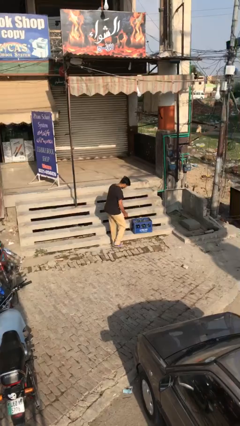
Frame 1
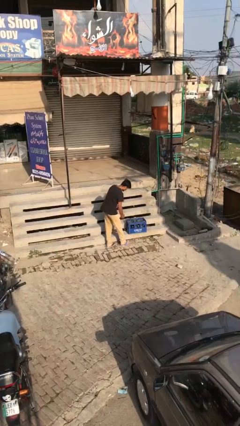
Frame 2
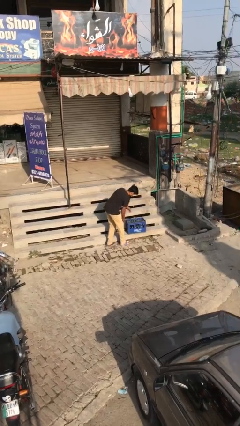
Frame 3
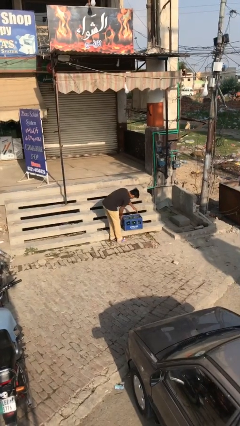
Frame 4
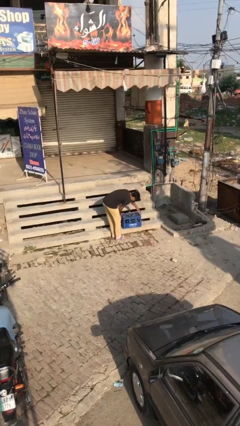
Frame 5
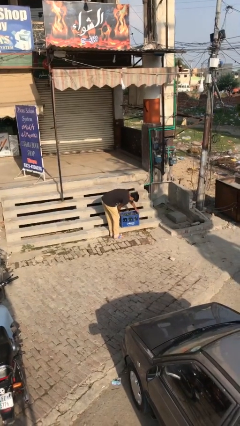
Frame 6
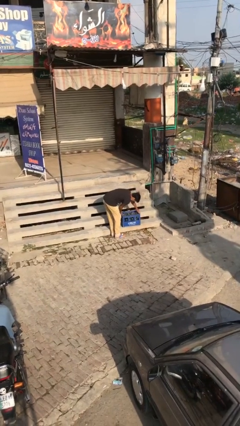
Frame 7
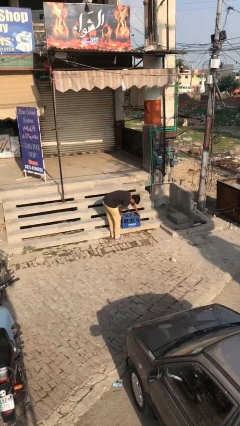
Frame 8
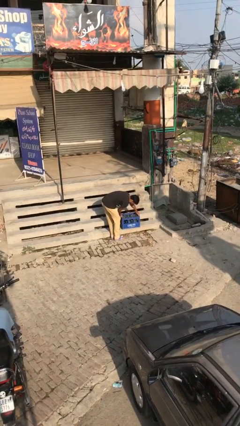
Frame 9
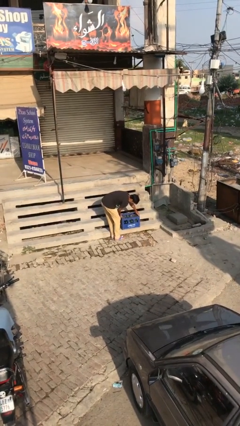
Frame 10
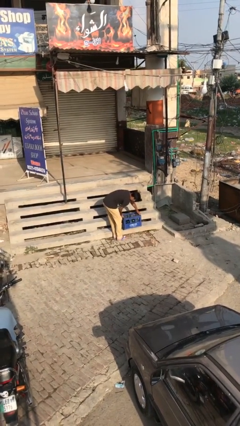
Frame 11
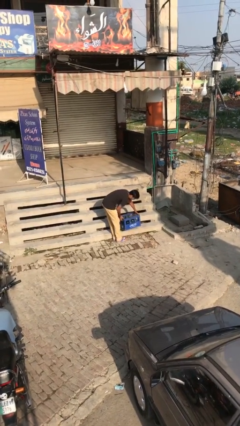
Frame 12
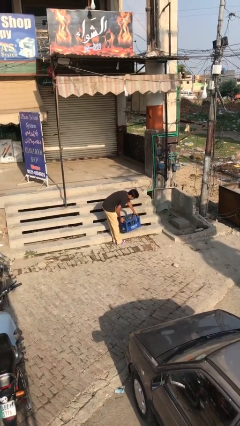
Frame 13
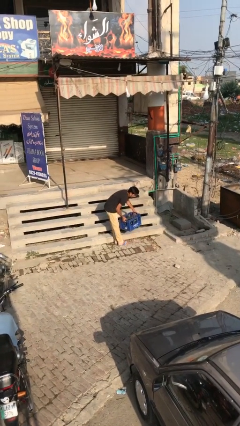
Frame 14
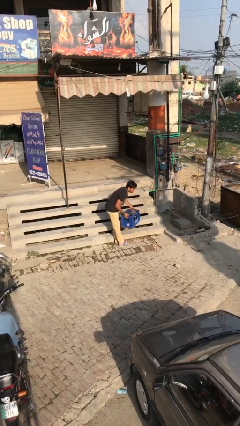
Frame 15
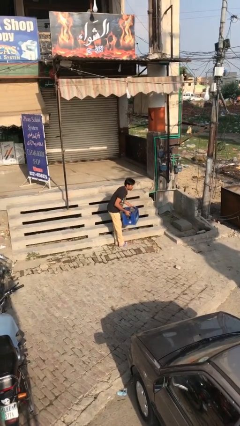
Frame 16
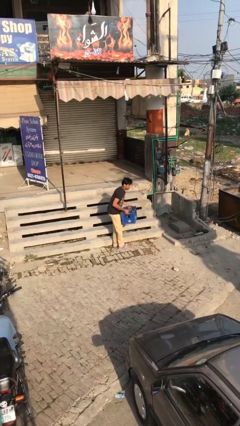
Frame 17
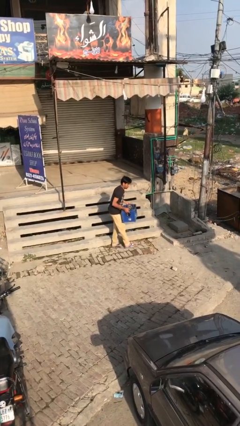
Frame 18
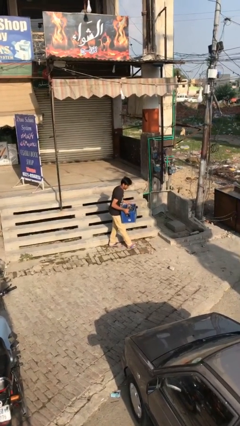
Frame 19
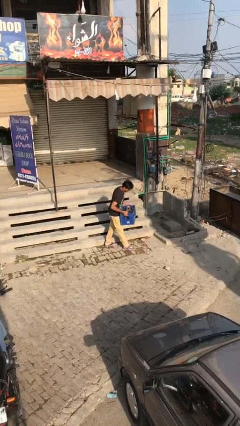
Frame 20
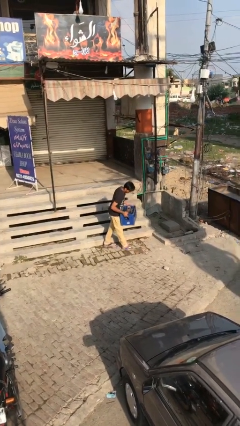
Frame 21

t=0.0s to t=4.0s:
person picks up object from floor

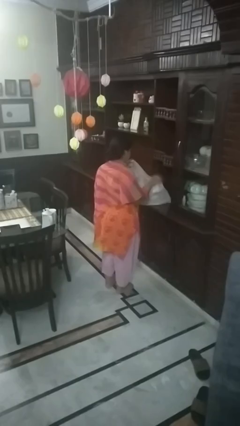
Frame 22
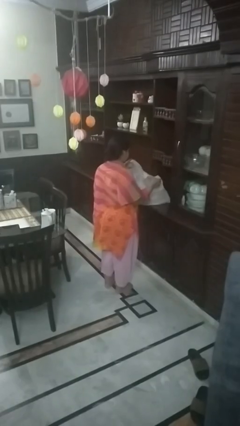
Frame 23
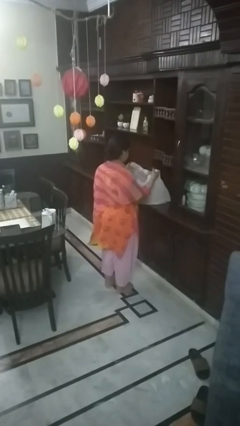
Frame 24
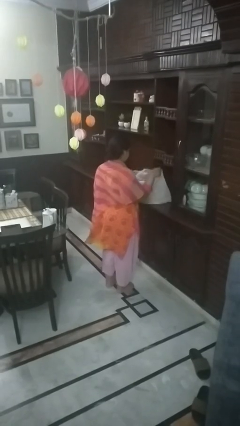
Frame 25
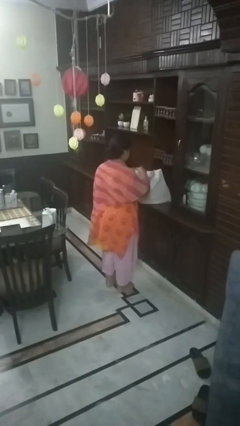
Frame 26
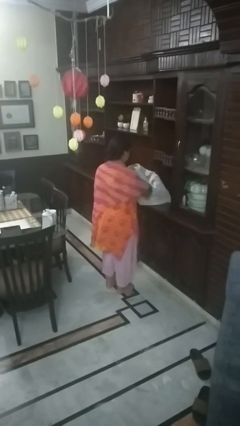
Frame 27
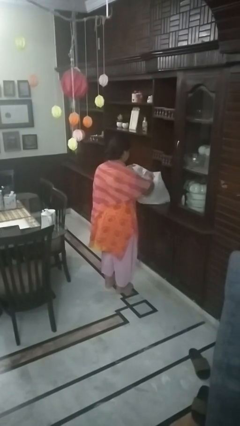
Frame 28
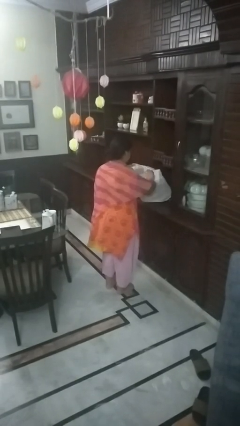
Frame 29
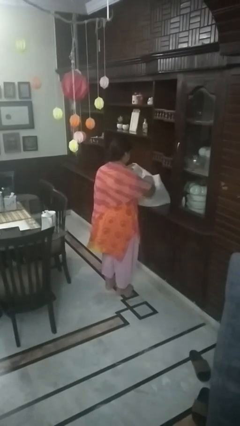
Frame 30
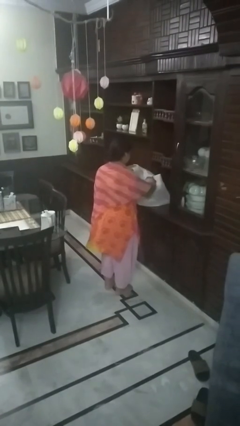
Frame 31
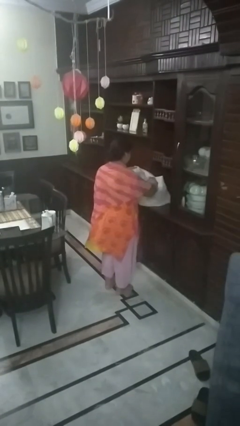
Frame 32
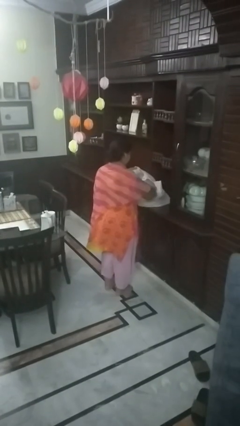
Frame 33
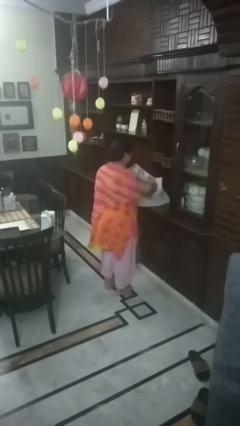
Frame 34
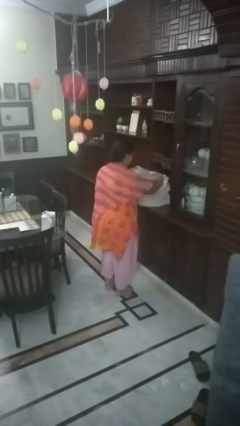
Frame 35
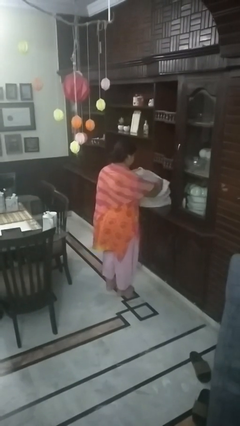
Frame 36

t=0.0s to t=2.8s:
person searches in bag

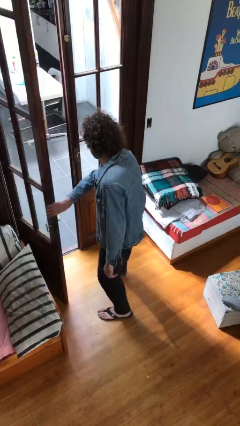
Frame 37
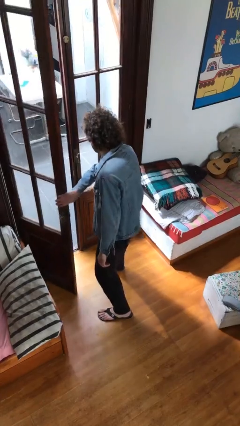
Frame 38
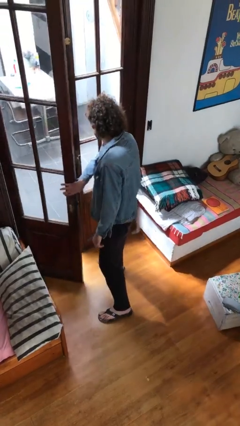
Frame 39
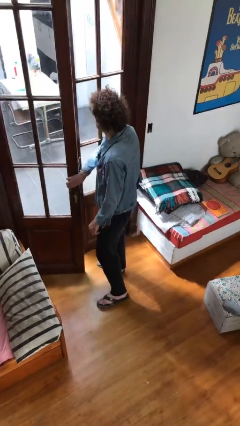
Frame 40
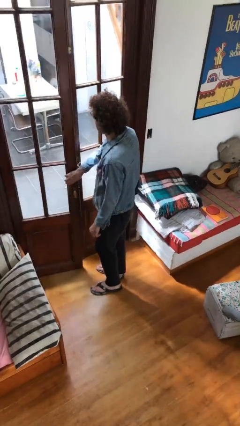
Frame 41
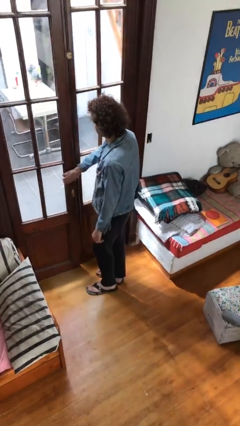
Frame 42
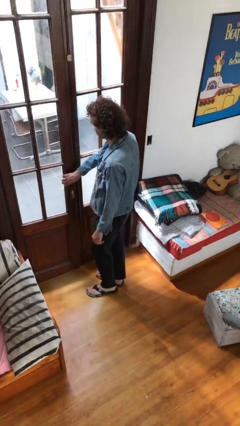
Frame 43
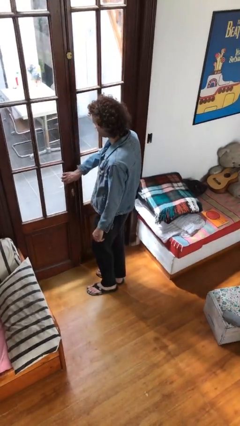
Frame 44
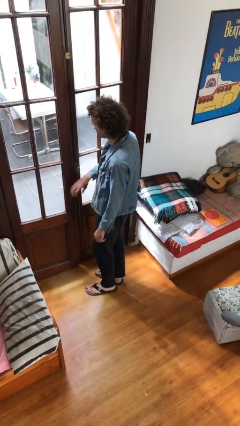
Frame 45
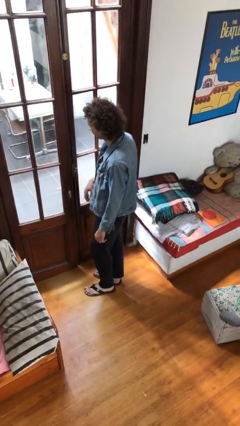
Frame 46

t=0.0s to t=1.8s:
person closes facility door

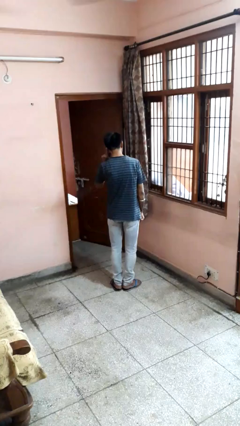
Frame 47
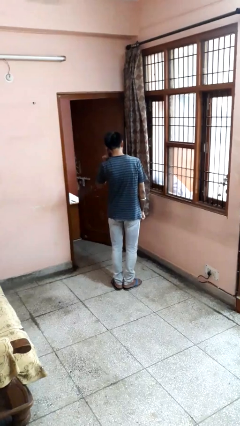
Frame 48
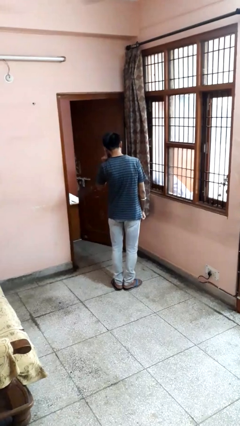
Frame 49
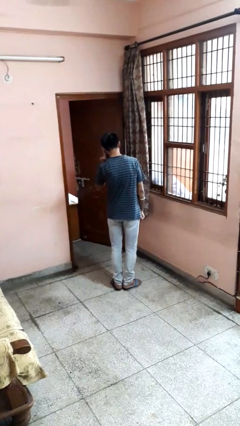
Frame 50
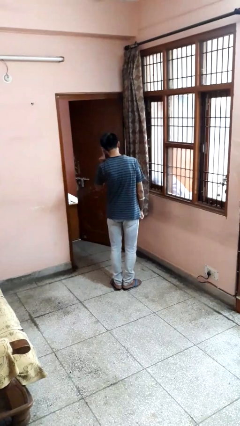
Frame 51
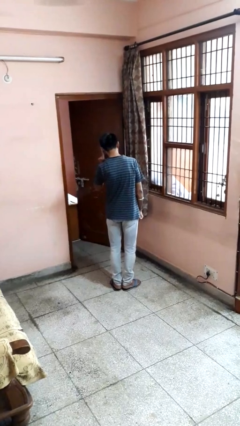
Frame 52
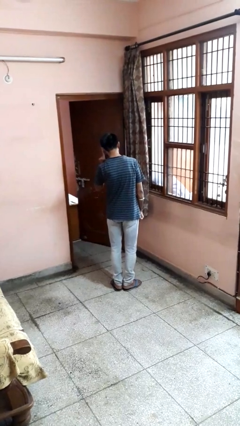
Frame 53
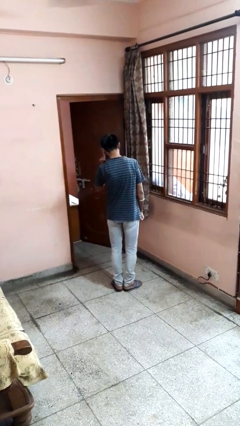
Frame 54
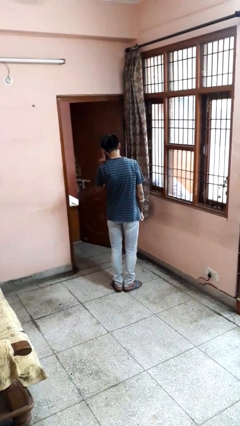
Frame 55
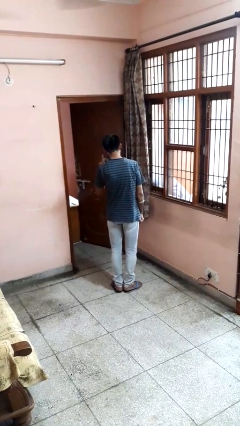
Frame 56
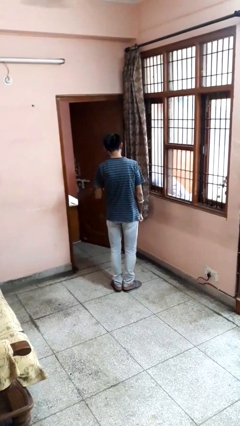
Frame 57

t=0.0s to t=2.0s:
person gestures listen closely

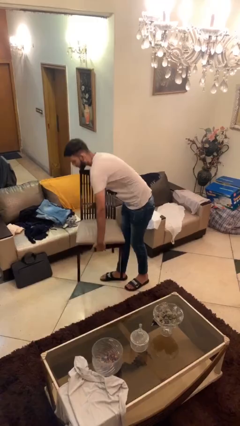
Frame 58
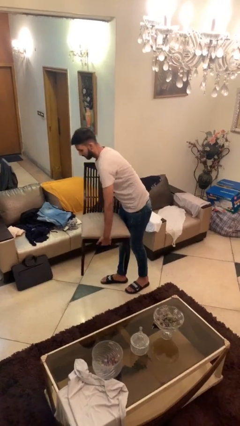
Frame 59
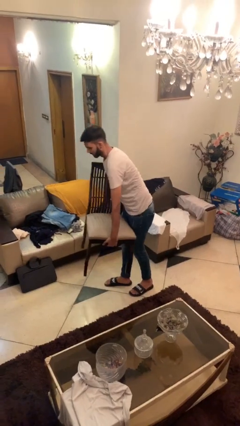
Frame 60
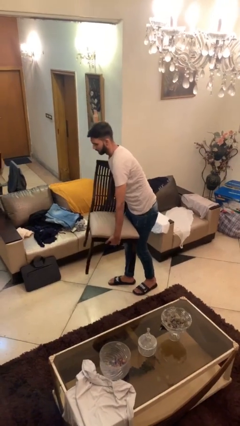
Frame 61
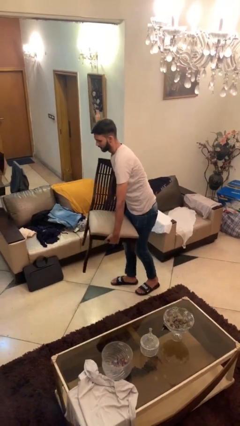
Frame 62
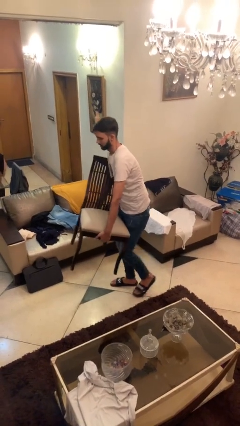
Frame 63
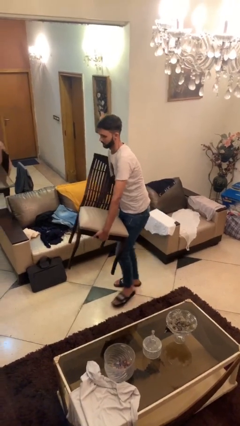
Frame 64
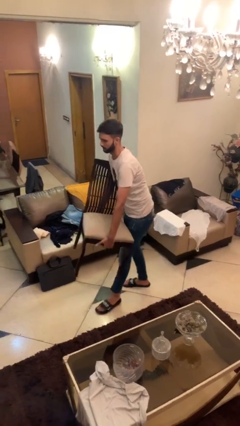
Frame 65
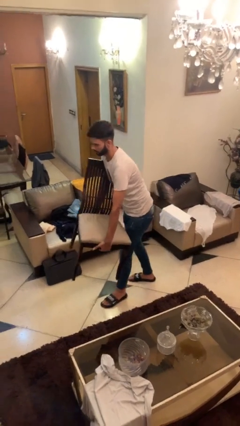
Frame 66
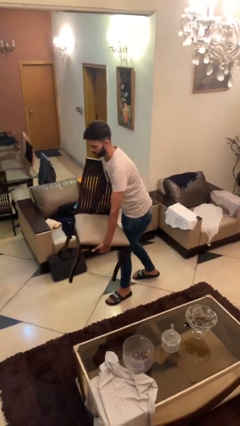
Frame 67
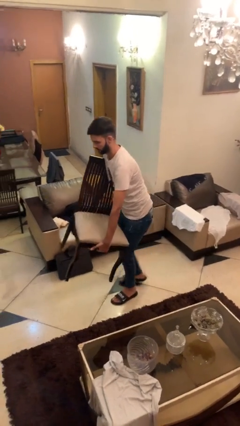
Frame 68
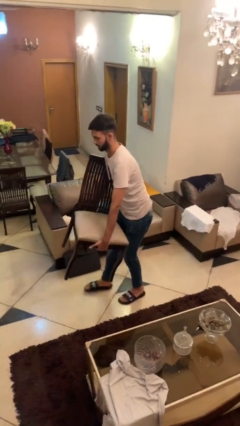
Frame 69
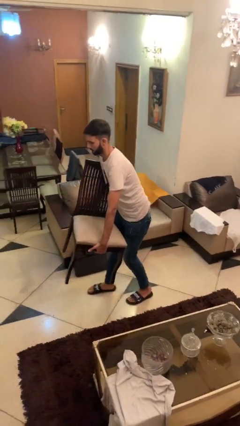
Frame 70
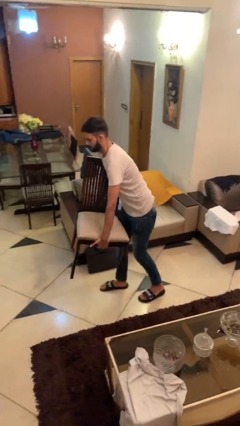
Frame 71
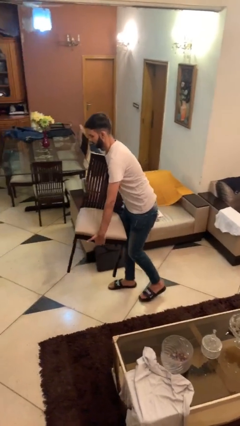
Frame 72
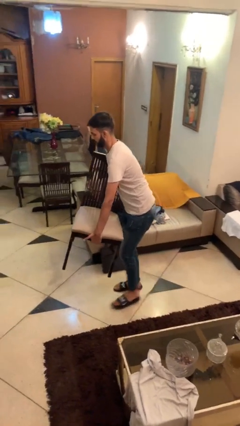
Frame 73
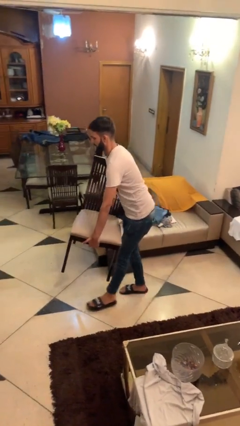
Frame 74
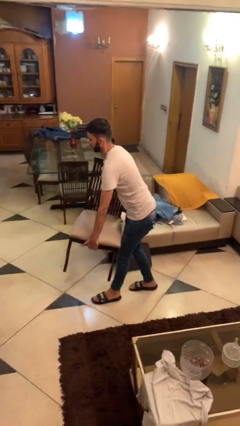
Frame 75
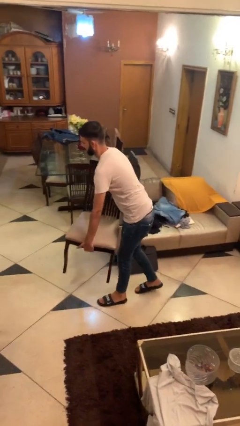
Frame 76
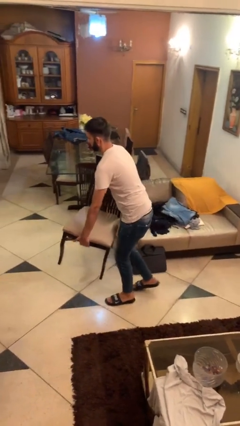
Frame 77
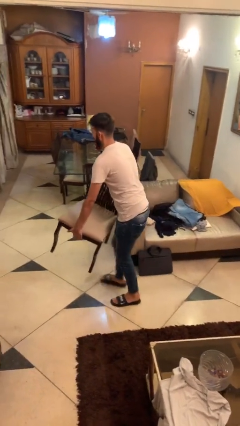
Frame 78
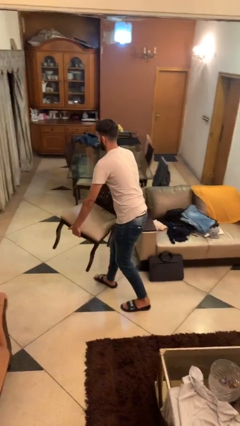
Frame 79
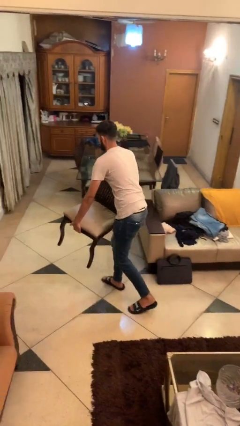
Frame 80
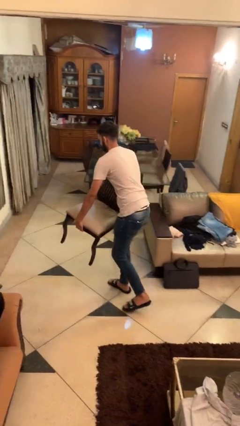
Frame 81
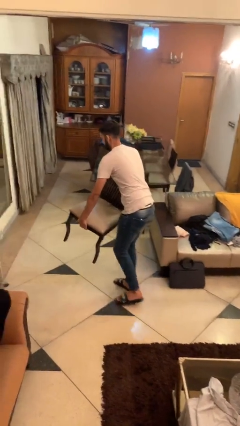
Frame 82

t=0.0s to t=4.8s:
person carries heavy object

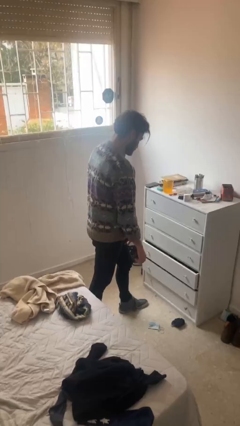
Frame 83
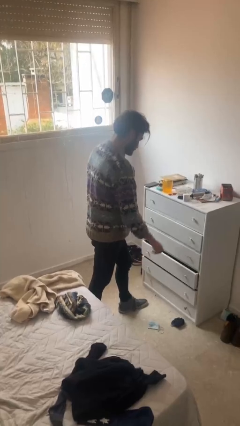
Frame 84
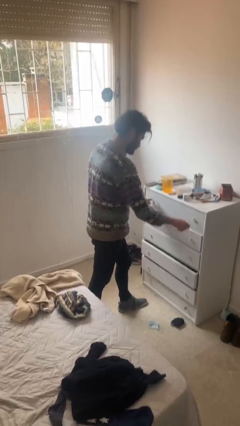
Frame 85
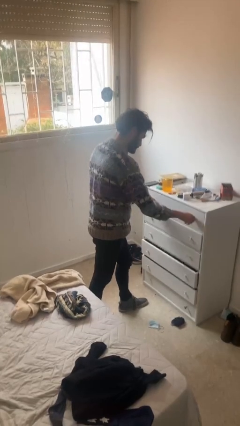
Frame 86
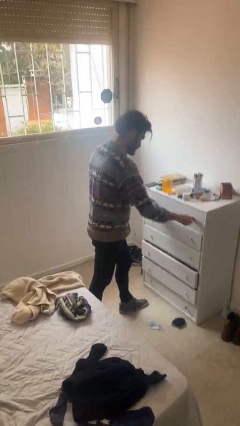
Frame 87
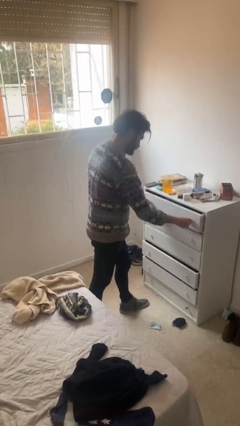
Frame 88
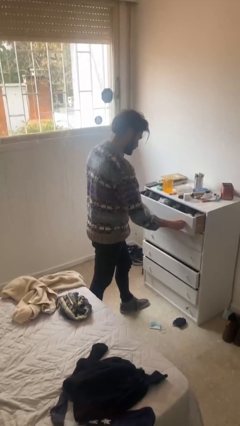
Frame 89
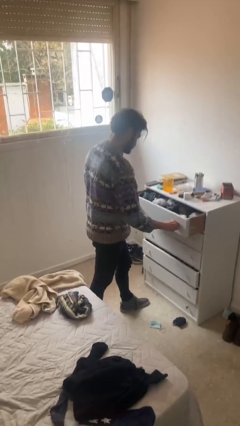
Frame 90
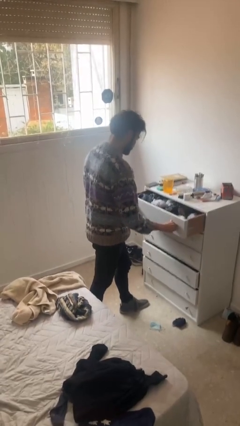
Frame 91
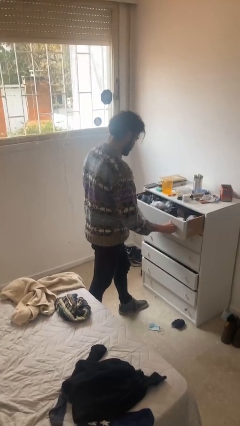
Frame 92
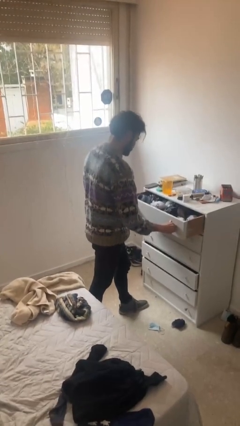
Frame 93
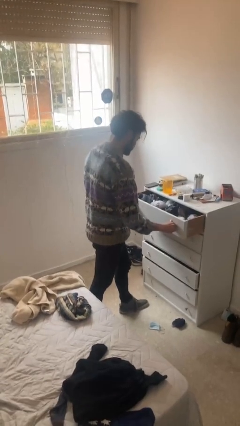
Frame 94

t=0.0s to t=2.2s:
person opens dresser drawer
